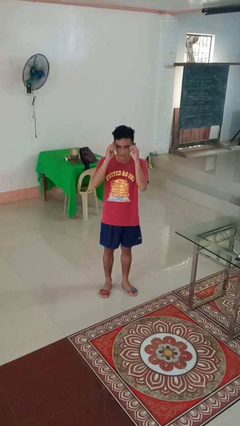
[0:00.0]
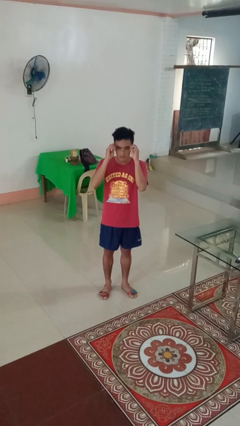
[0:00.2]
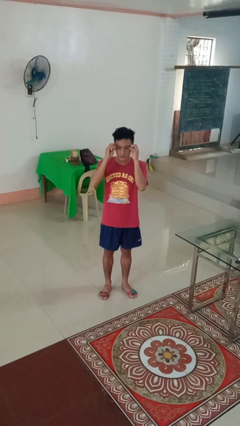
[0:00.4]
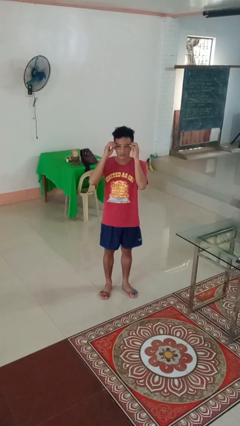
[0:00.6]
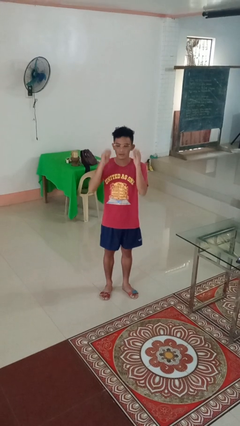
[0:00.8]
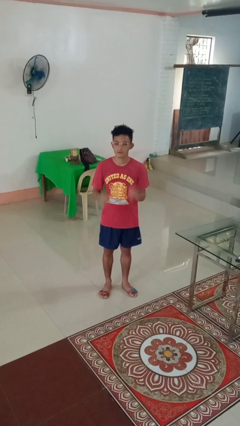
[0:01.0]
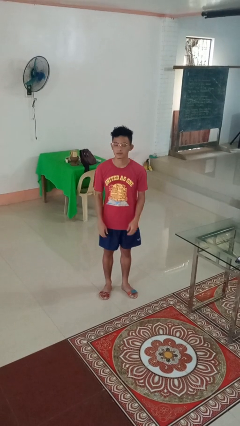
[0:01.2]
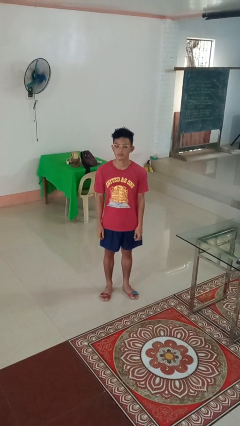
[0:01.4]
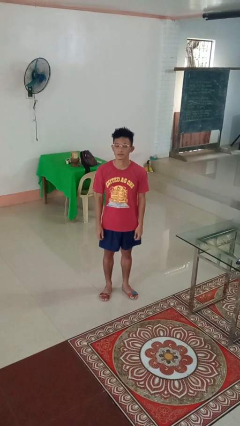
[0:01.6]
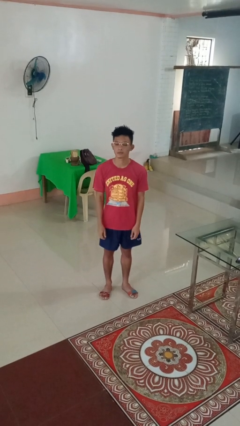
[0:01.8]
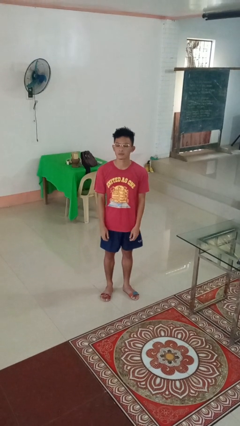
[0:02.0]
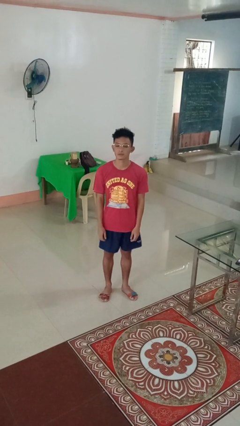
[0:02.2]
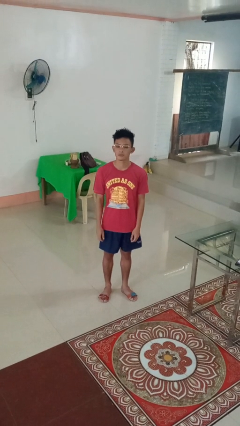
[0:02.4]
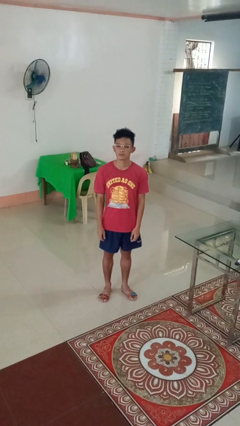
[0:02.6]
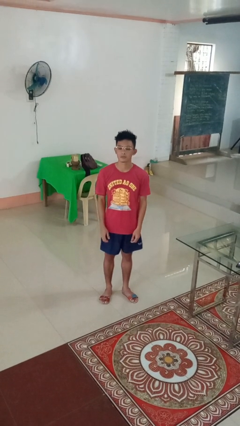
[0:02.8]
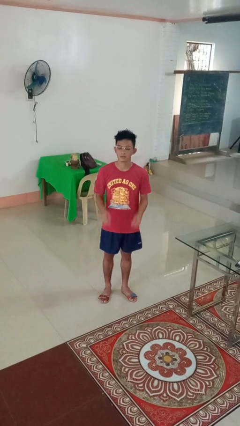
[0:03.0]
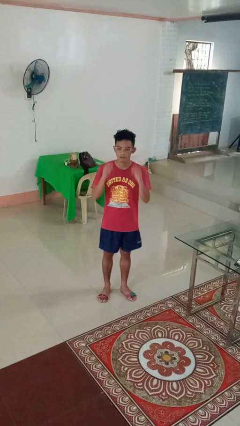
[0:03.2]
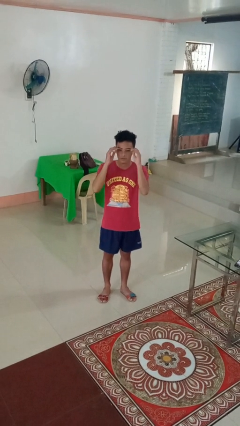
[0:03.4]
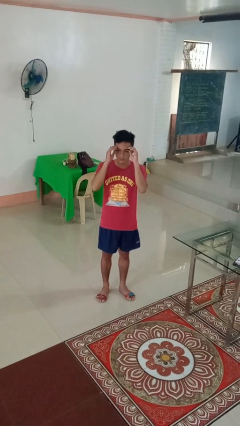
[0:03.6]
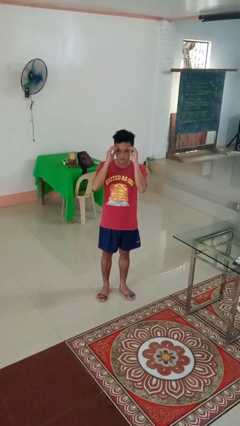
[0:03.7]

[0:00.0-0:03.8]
person puts on glasses

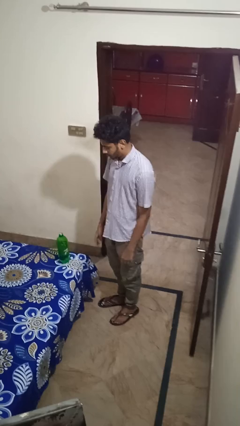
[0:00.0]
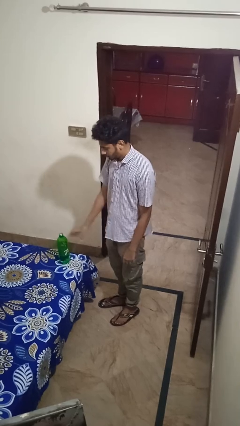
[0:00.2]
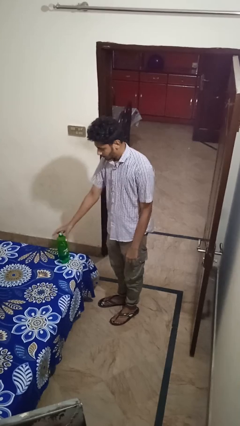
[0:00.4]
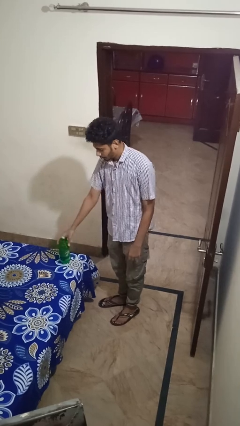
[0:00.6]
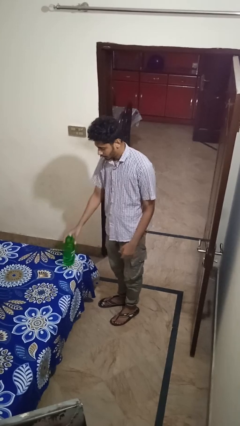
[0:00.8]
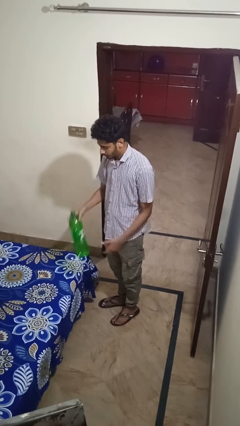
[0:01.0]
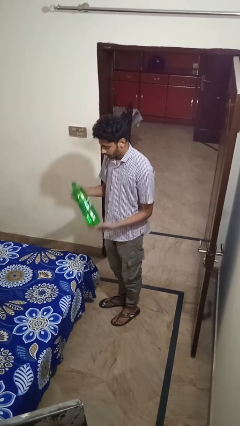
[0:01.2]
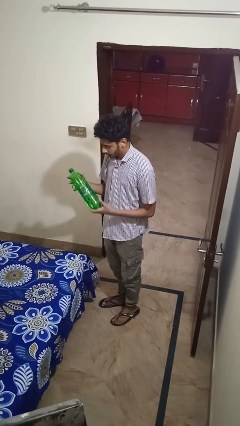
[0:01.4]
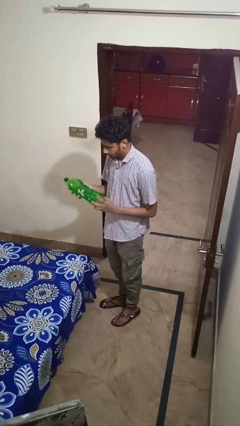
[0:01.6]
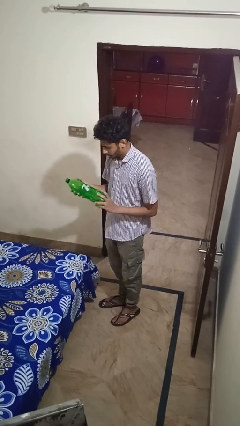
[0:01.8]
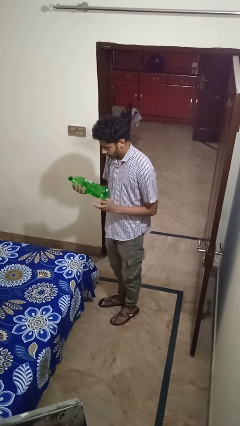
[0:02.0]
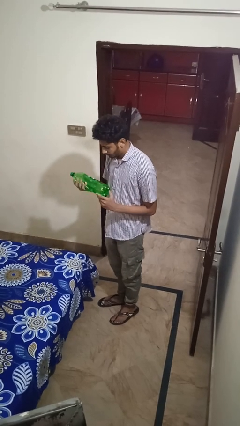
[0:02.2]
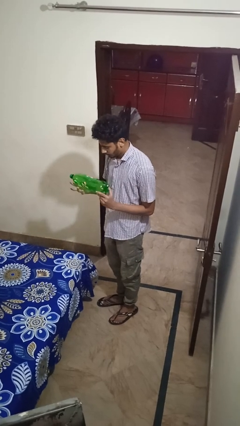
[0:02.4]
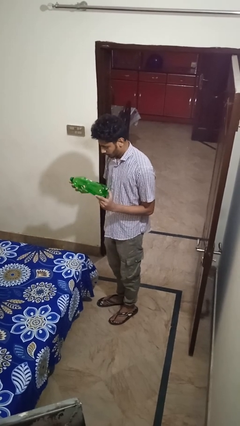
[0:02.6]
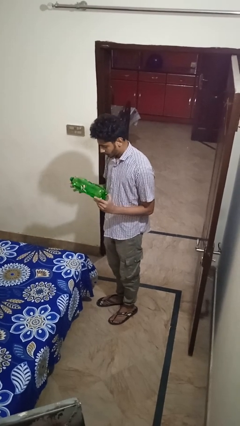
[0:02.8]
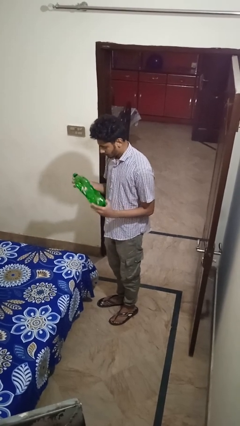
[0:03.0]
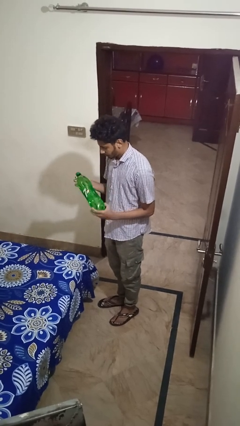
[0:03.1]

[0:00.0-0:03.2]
person picks up object from bed

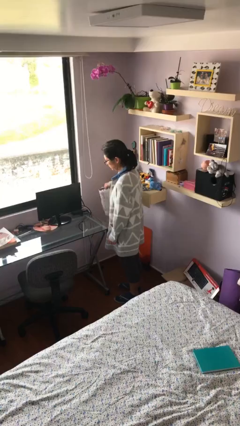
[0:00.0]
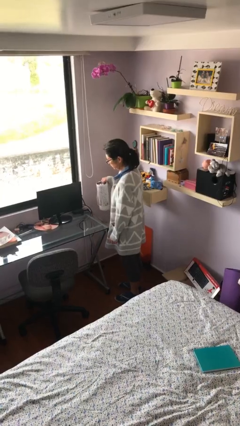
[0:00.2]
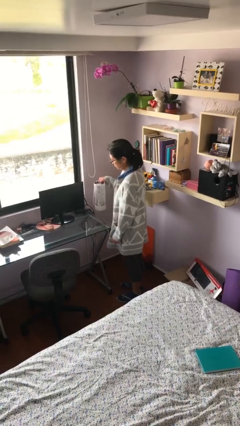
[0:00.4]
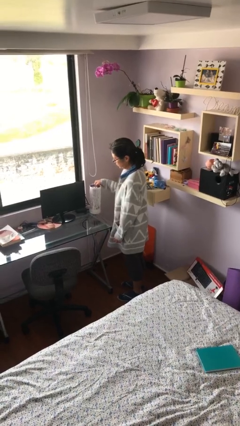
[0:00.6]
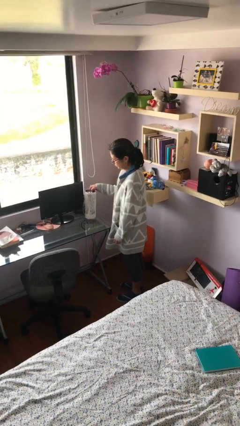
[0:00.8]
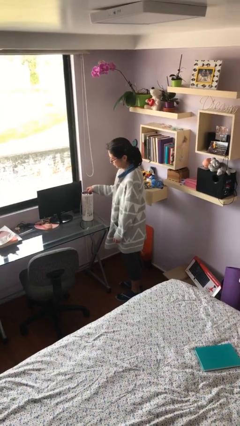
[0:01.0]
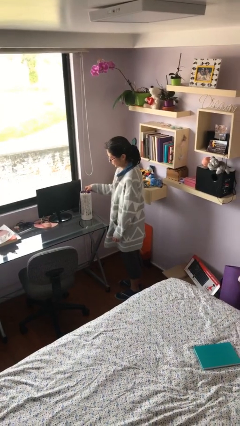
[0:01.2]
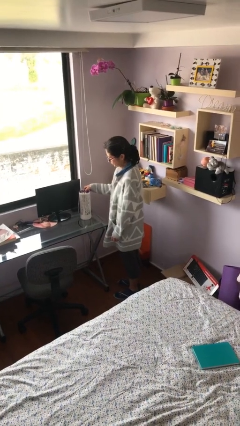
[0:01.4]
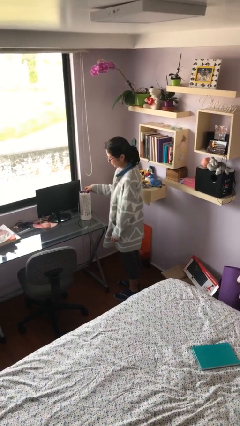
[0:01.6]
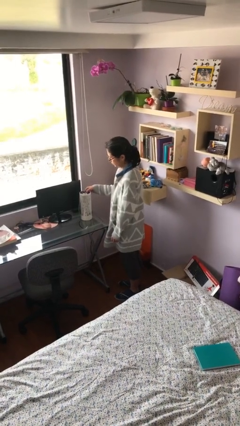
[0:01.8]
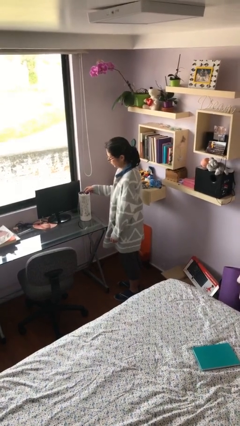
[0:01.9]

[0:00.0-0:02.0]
person puts down object on table

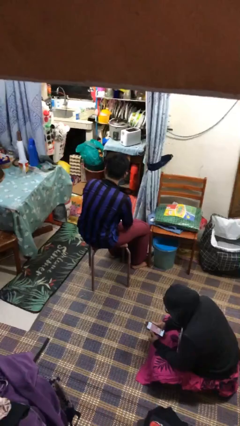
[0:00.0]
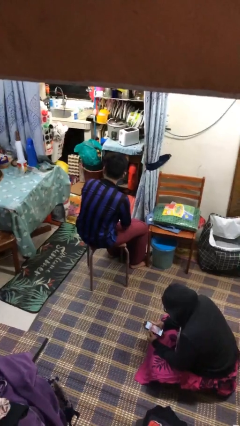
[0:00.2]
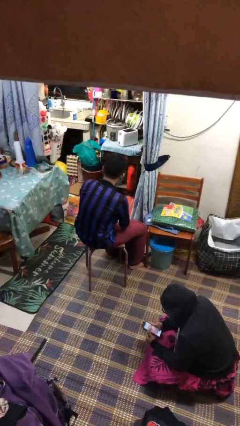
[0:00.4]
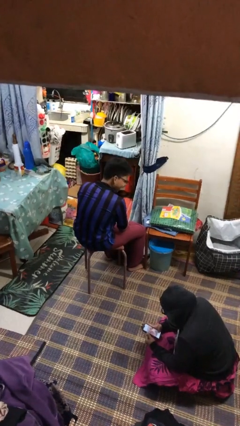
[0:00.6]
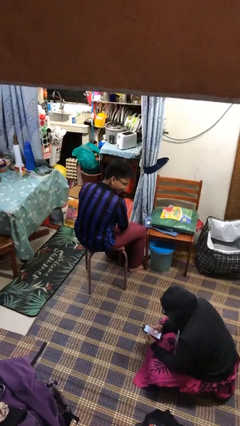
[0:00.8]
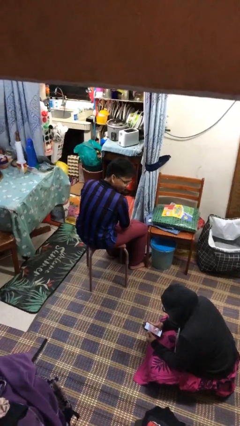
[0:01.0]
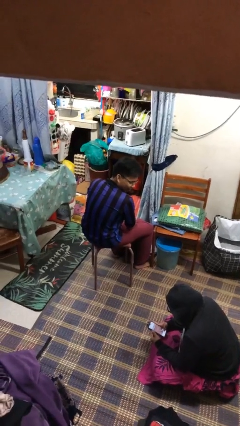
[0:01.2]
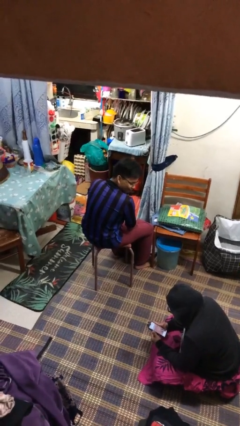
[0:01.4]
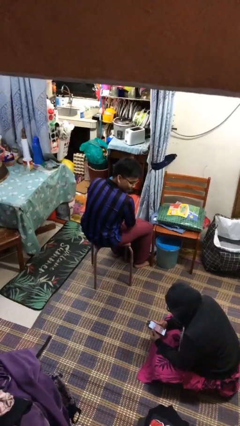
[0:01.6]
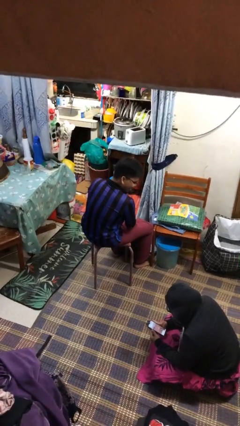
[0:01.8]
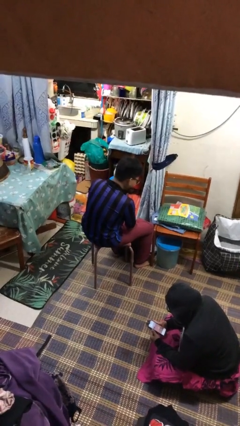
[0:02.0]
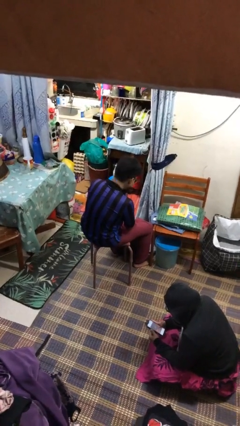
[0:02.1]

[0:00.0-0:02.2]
person looks over shoulder

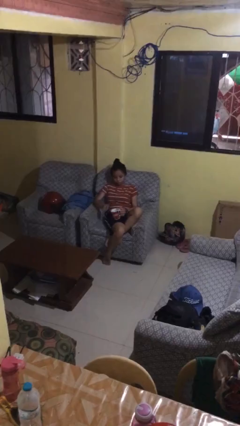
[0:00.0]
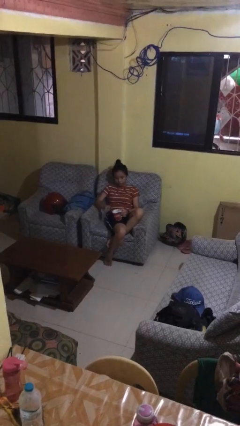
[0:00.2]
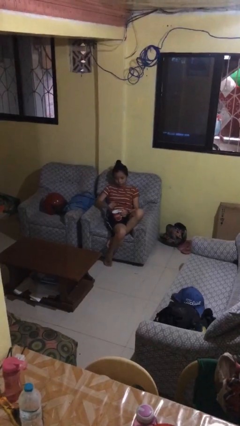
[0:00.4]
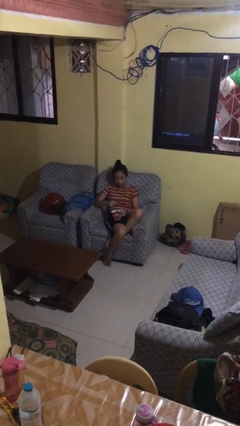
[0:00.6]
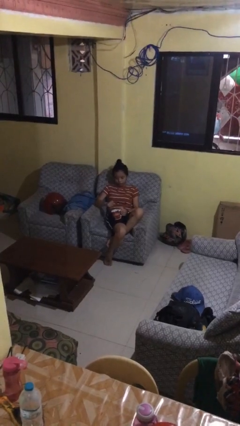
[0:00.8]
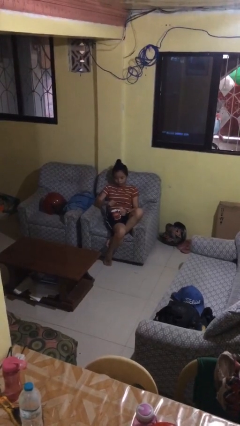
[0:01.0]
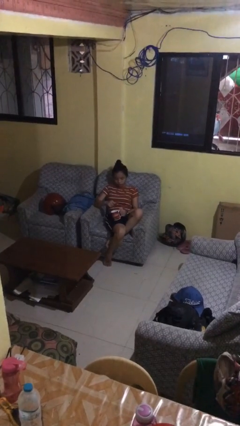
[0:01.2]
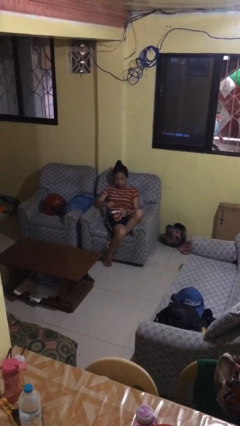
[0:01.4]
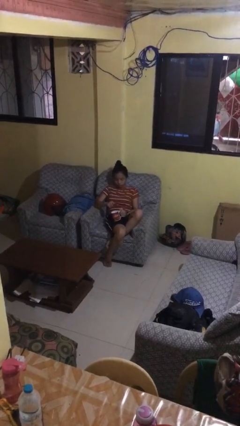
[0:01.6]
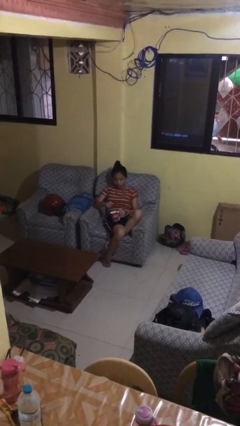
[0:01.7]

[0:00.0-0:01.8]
person stirs mug

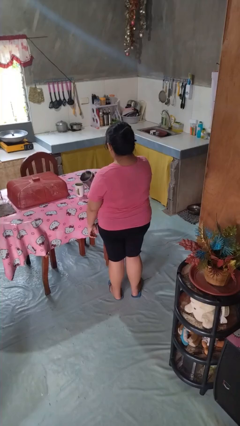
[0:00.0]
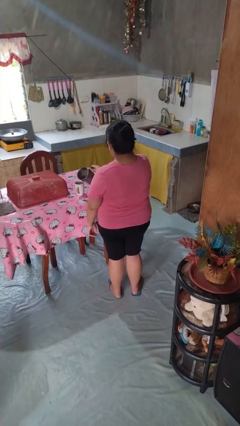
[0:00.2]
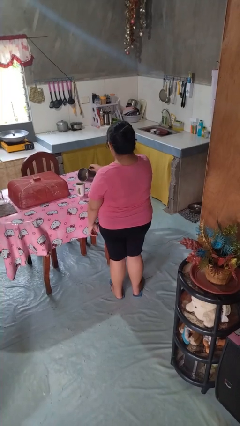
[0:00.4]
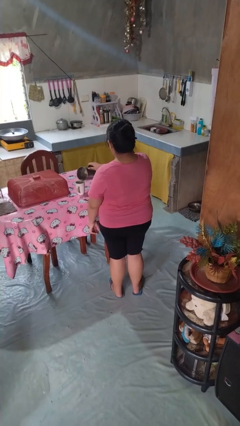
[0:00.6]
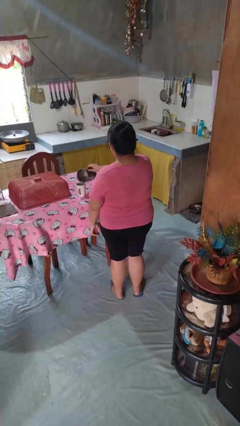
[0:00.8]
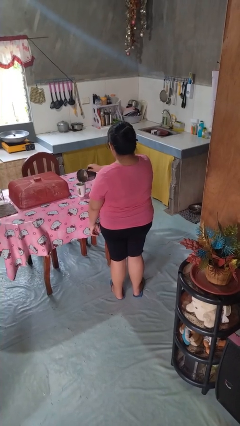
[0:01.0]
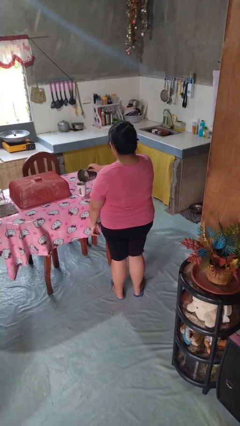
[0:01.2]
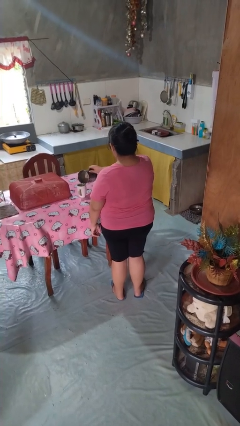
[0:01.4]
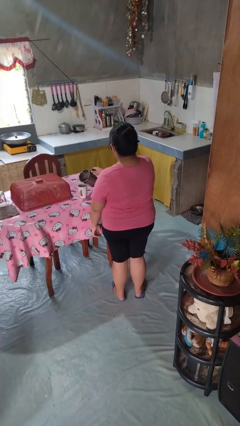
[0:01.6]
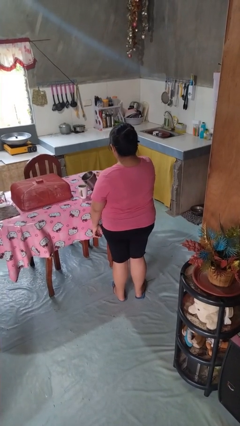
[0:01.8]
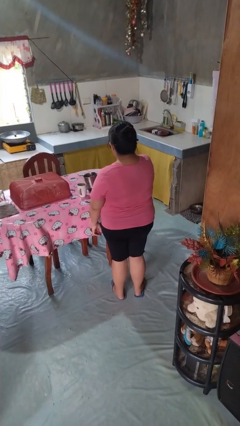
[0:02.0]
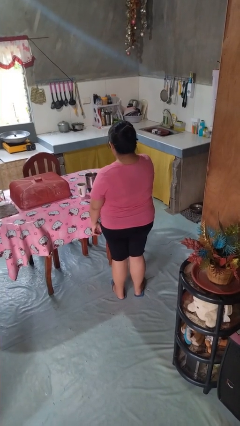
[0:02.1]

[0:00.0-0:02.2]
person pours coffee into mug

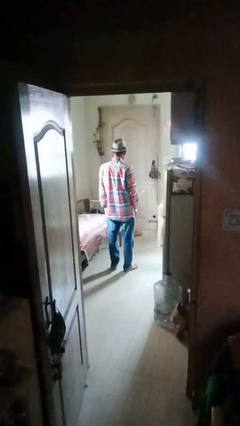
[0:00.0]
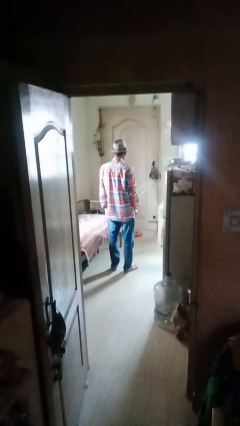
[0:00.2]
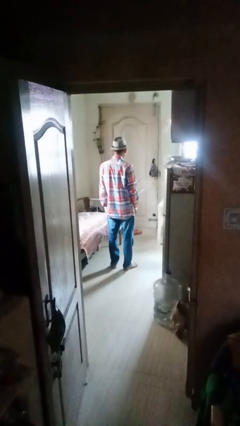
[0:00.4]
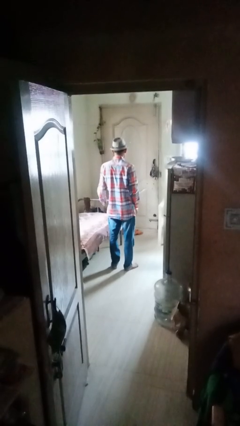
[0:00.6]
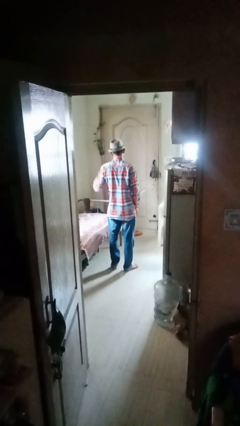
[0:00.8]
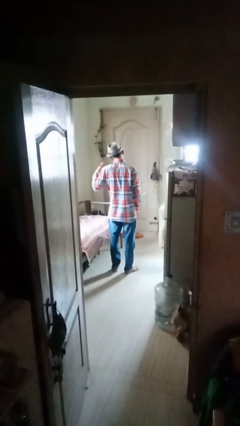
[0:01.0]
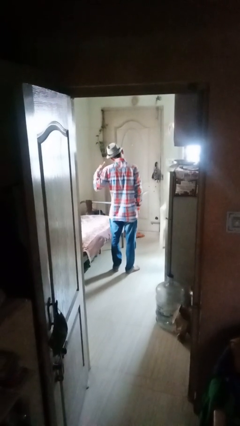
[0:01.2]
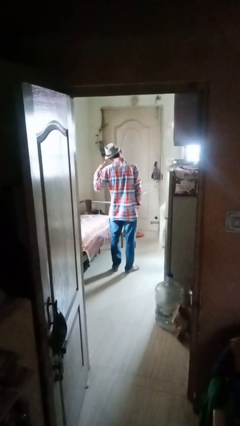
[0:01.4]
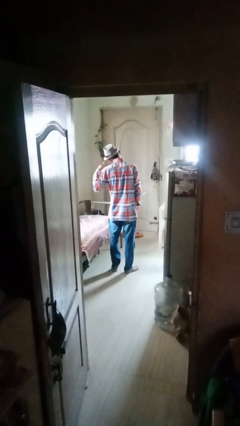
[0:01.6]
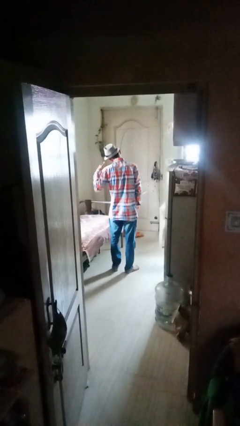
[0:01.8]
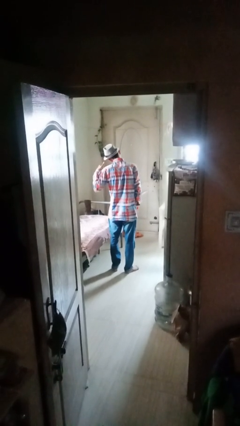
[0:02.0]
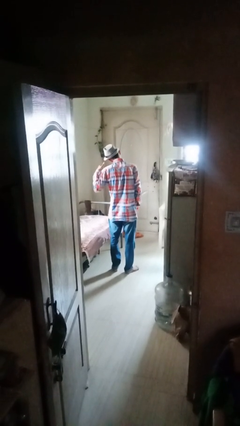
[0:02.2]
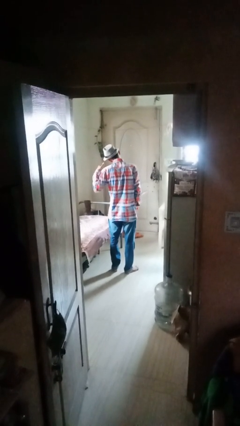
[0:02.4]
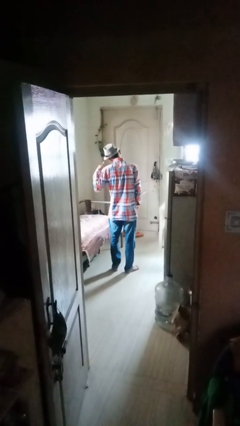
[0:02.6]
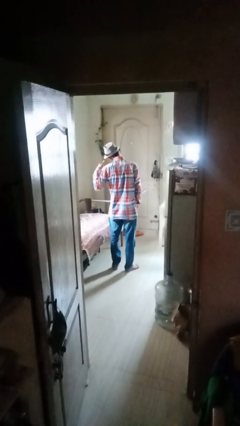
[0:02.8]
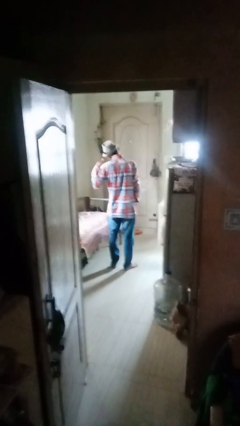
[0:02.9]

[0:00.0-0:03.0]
person gestures call me
